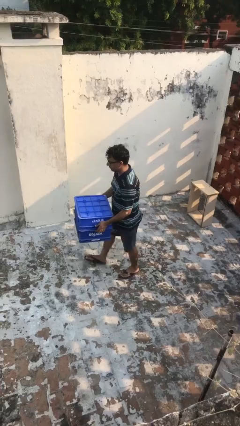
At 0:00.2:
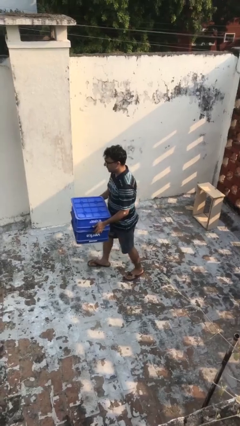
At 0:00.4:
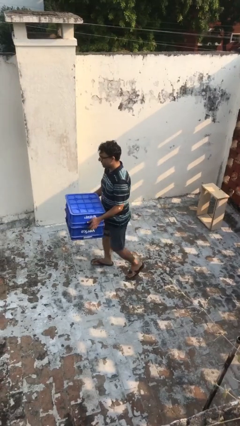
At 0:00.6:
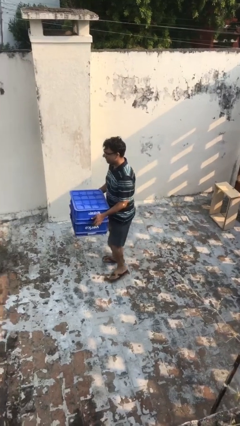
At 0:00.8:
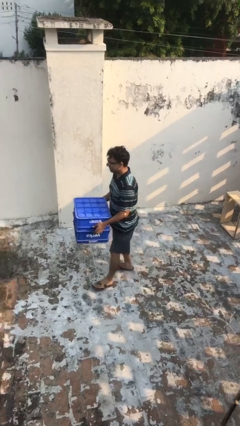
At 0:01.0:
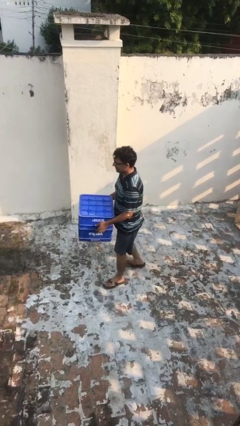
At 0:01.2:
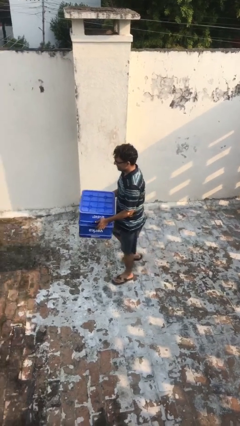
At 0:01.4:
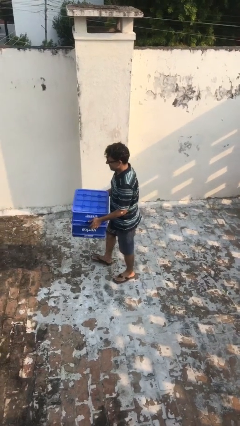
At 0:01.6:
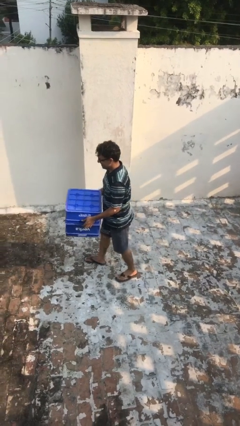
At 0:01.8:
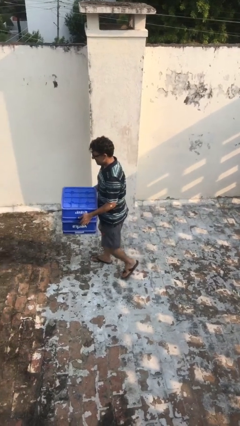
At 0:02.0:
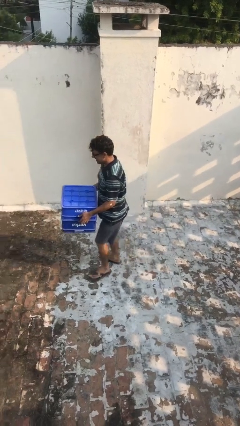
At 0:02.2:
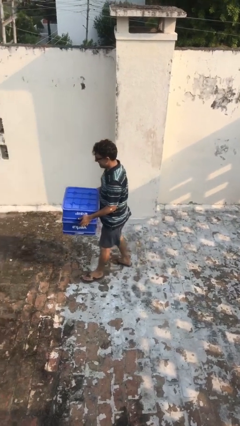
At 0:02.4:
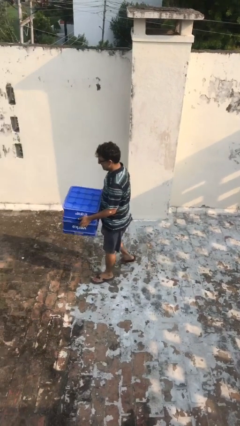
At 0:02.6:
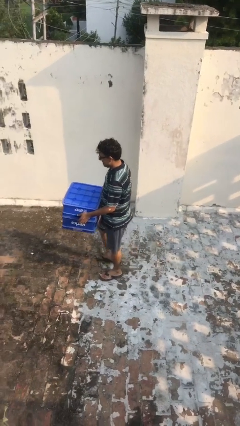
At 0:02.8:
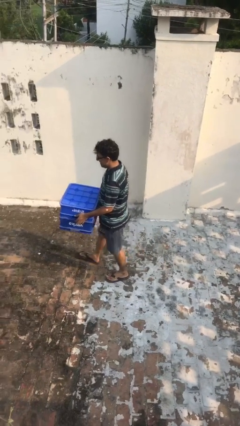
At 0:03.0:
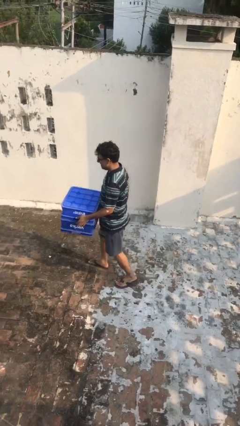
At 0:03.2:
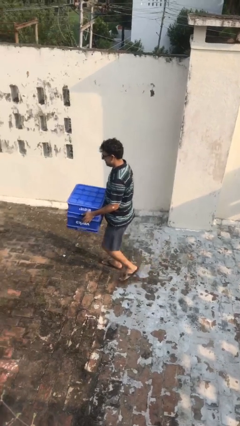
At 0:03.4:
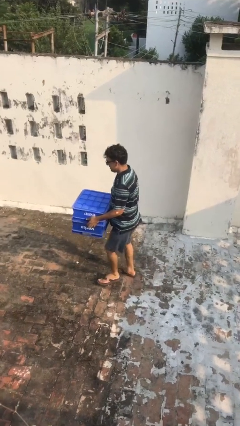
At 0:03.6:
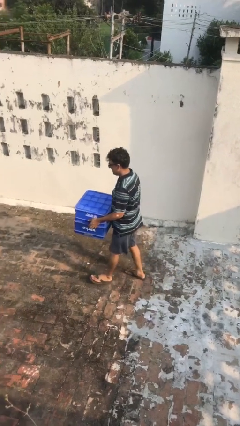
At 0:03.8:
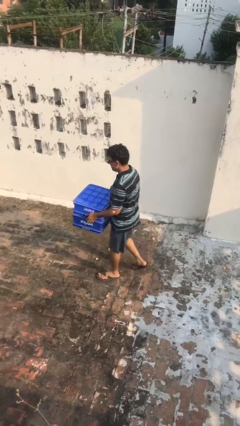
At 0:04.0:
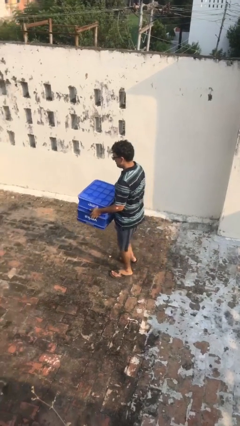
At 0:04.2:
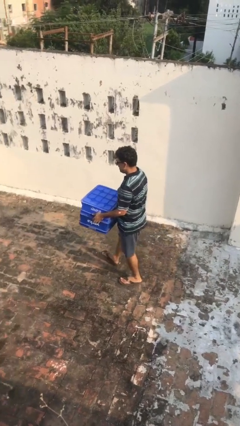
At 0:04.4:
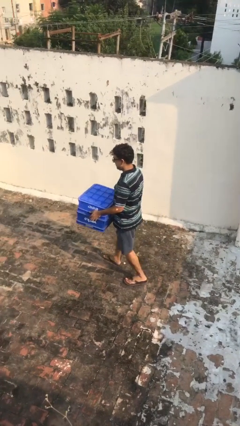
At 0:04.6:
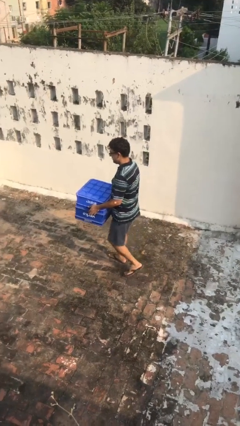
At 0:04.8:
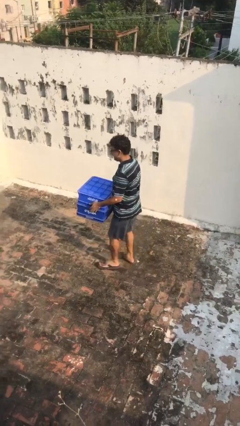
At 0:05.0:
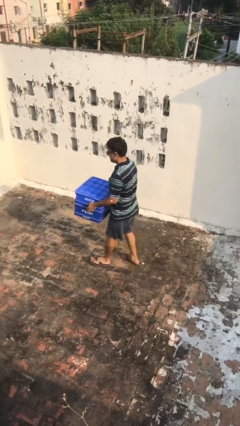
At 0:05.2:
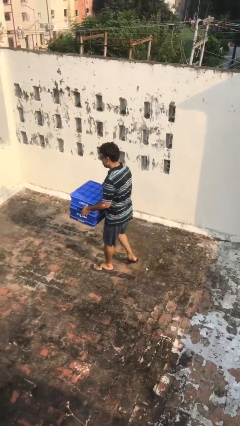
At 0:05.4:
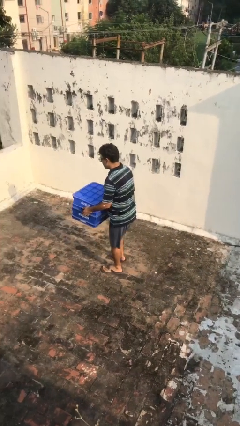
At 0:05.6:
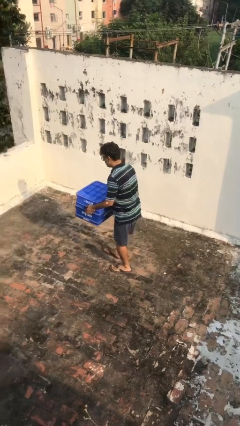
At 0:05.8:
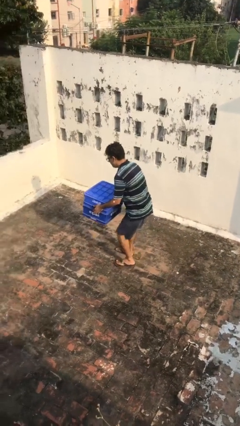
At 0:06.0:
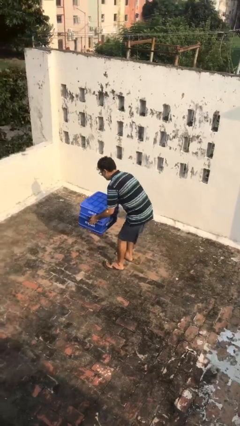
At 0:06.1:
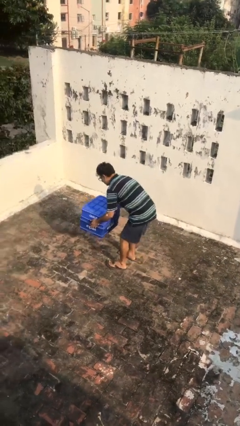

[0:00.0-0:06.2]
person carries heavy object

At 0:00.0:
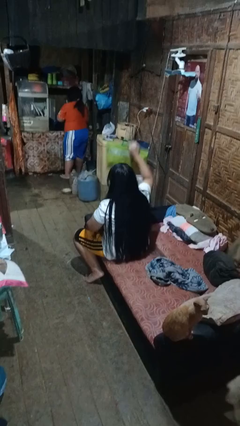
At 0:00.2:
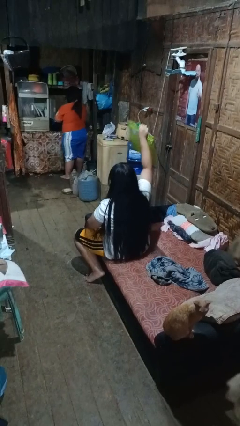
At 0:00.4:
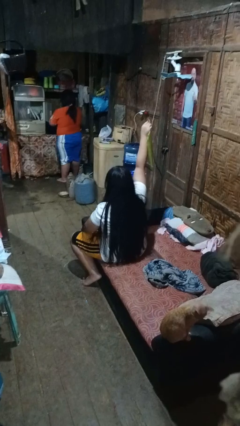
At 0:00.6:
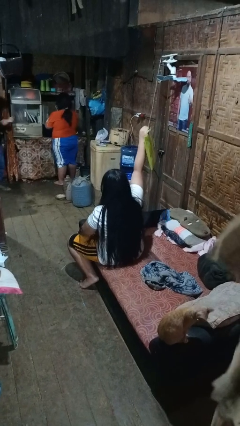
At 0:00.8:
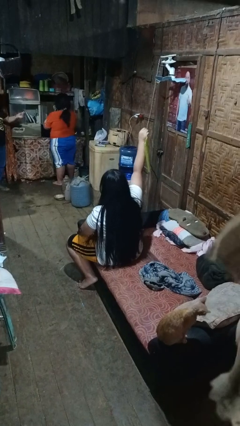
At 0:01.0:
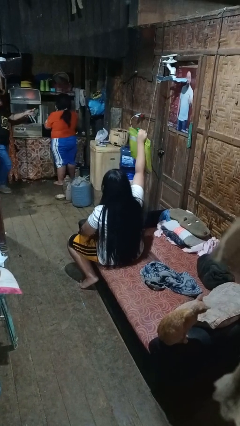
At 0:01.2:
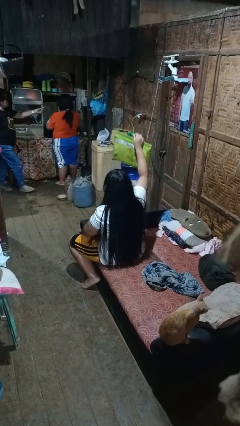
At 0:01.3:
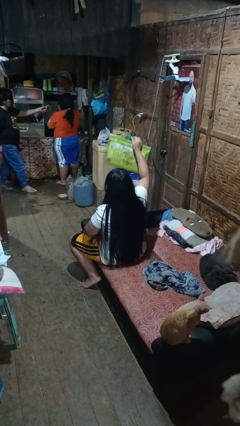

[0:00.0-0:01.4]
person holds object above head

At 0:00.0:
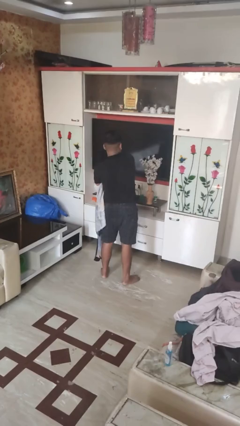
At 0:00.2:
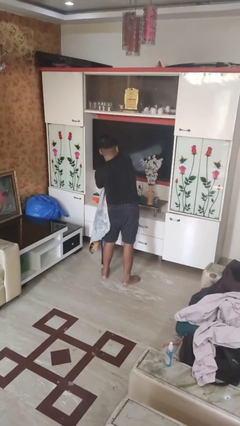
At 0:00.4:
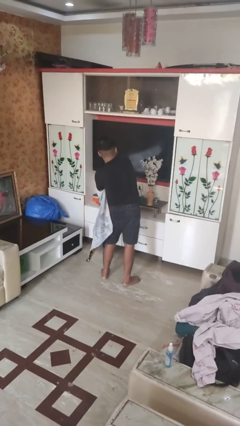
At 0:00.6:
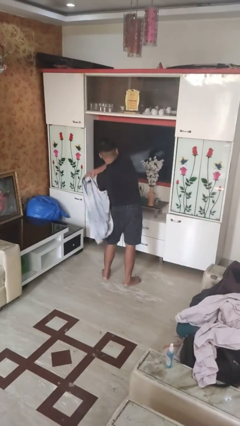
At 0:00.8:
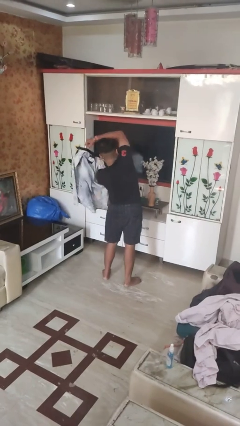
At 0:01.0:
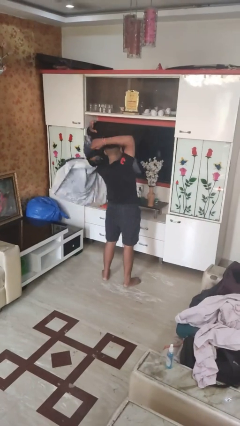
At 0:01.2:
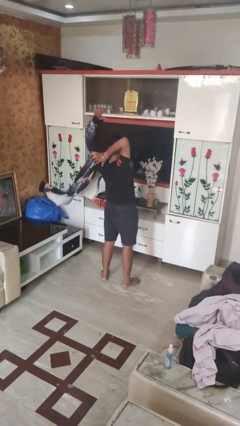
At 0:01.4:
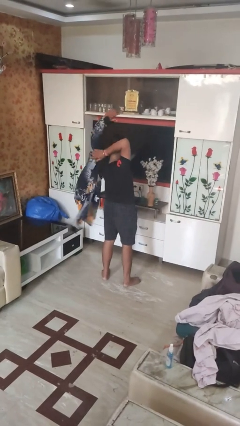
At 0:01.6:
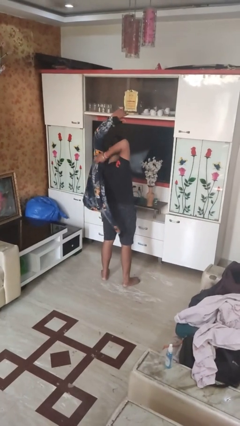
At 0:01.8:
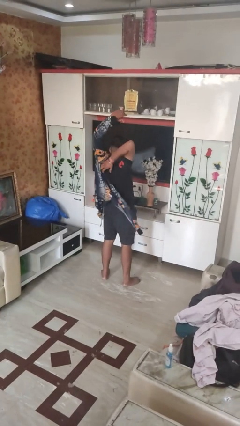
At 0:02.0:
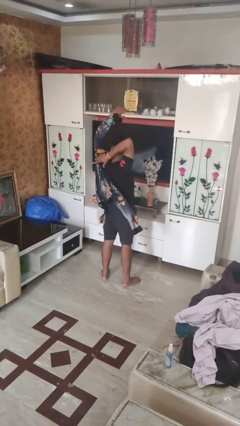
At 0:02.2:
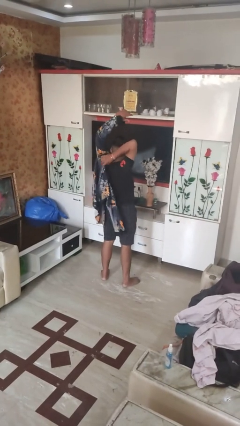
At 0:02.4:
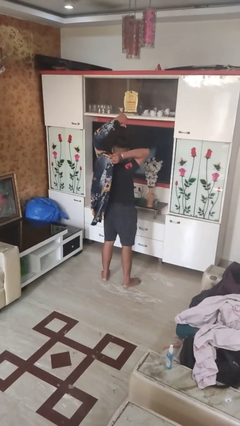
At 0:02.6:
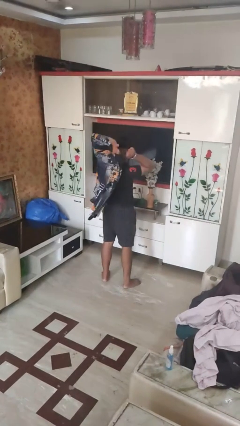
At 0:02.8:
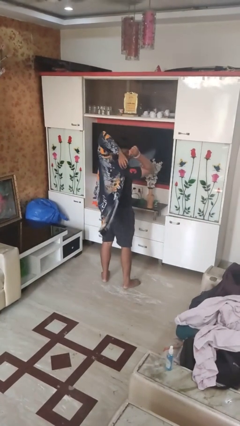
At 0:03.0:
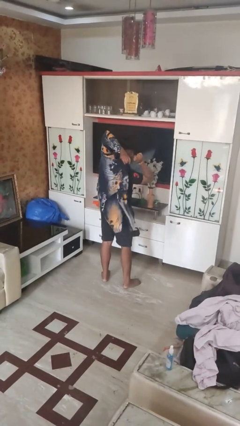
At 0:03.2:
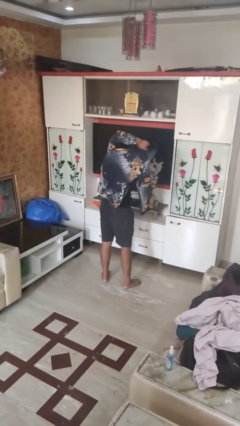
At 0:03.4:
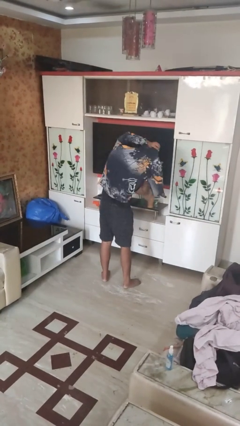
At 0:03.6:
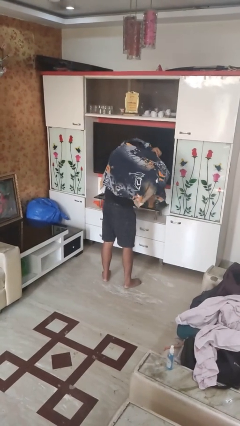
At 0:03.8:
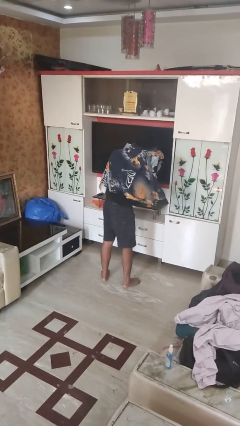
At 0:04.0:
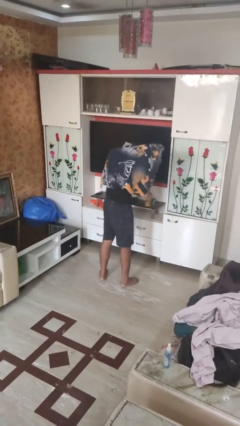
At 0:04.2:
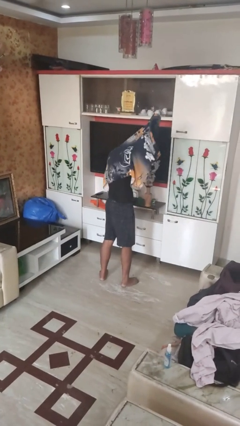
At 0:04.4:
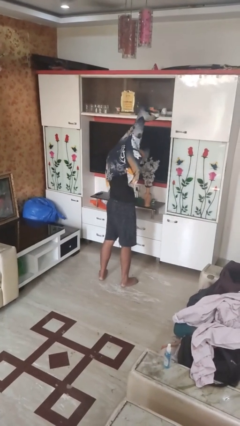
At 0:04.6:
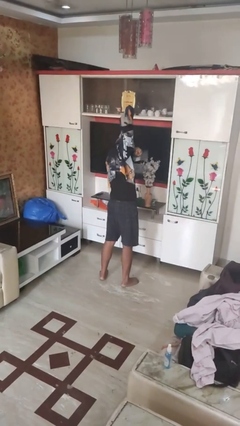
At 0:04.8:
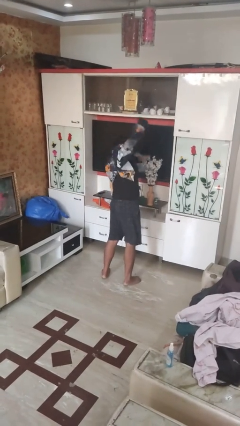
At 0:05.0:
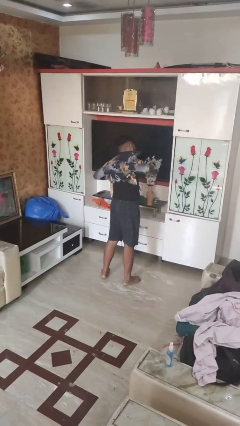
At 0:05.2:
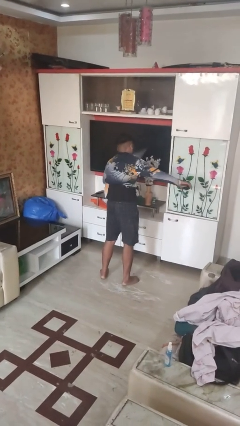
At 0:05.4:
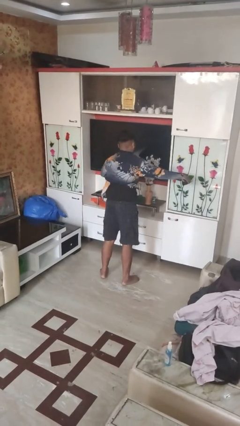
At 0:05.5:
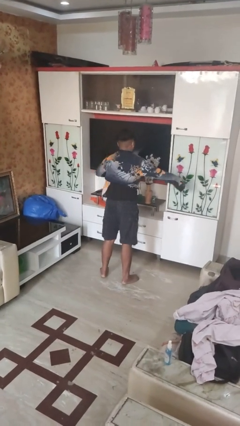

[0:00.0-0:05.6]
person puts on shirt

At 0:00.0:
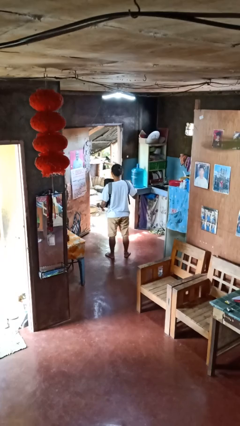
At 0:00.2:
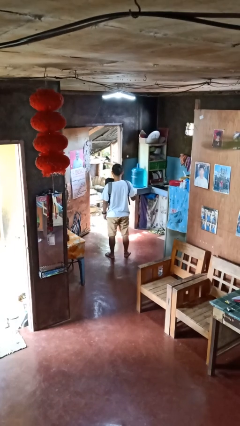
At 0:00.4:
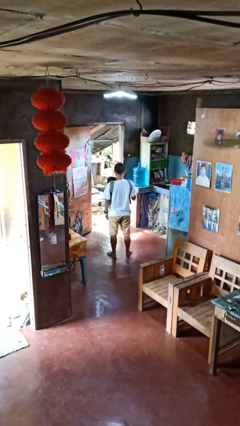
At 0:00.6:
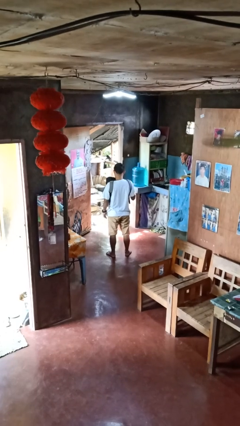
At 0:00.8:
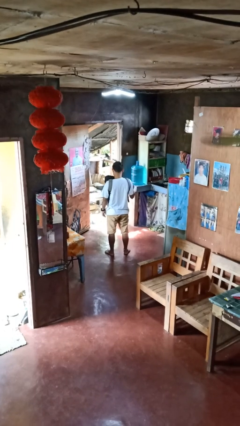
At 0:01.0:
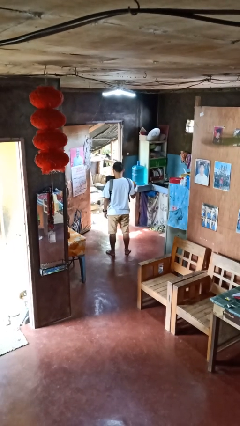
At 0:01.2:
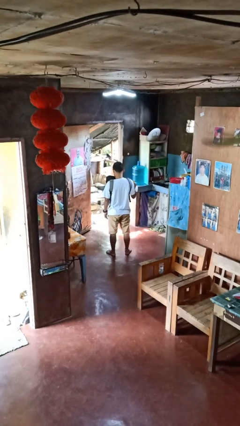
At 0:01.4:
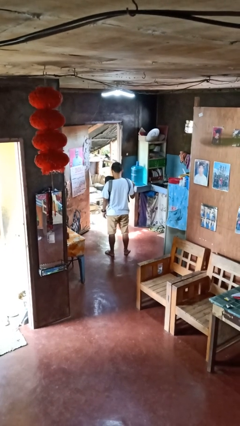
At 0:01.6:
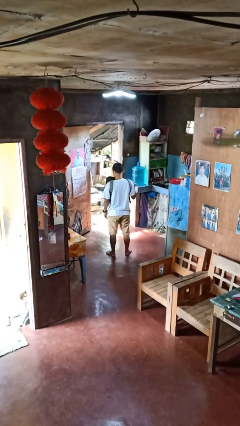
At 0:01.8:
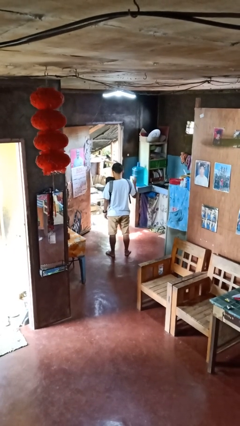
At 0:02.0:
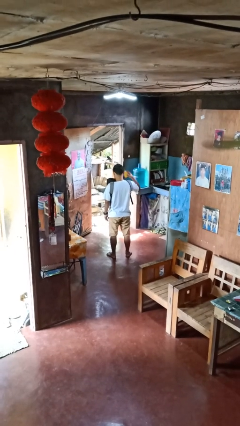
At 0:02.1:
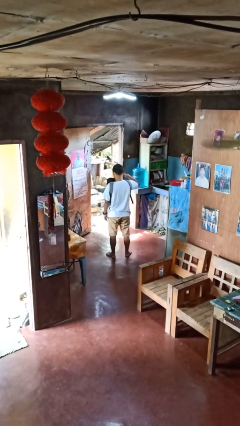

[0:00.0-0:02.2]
person takes object from backpack

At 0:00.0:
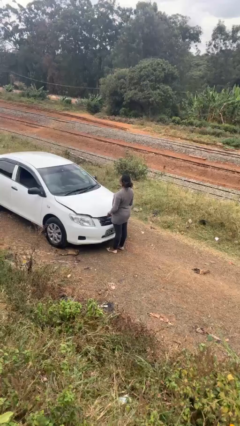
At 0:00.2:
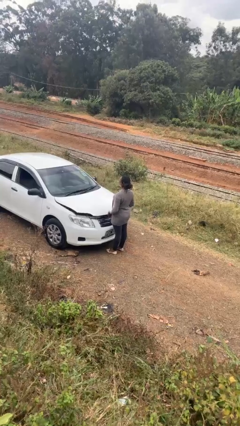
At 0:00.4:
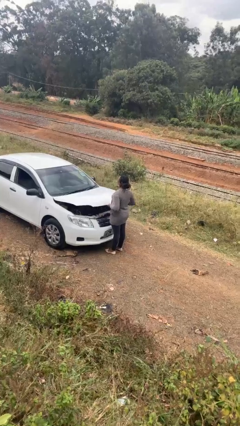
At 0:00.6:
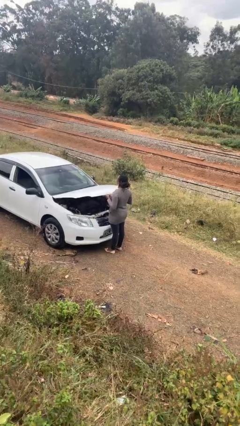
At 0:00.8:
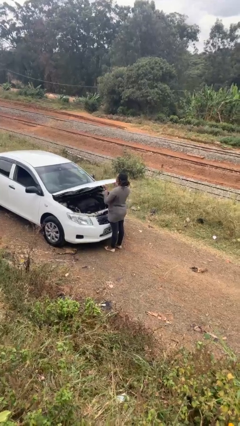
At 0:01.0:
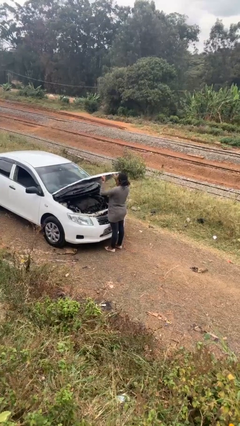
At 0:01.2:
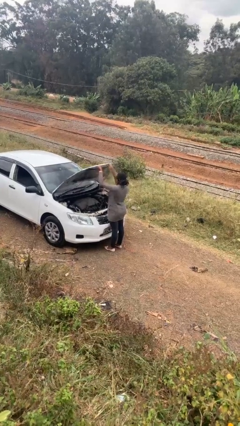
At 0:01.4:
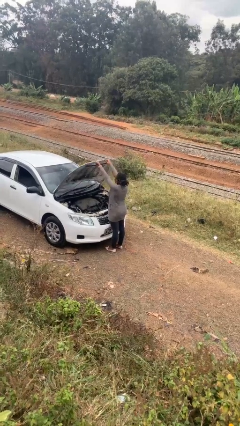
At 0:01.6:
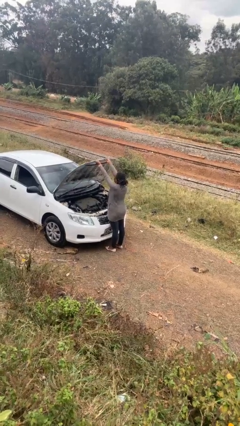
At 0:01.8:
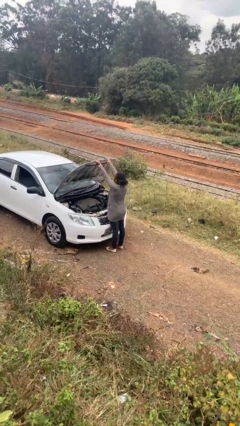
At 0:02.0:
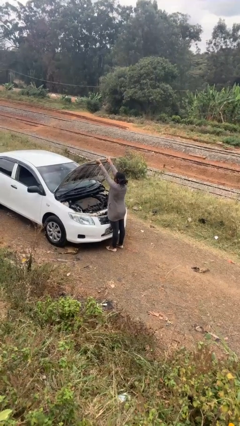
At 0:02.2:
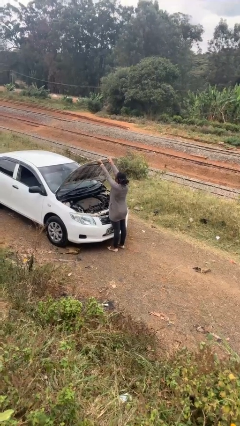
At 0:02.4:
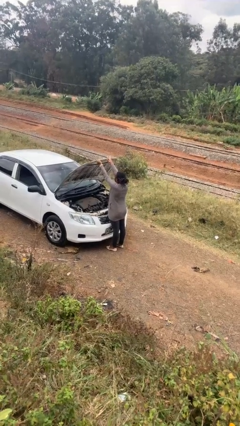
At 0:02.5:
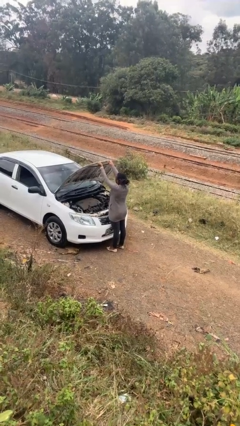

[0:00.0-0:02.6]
person opens car hood
